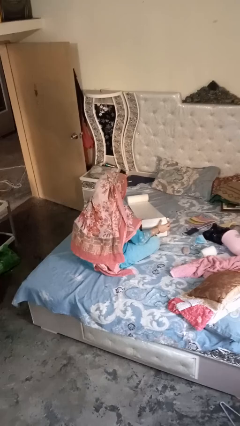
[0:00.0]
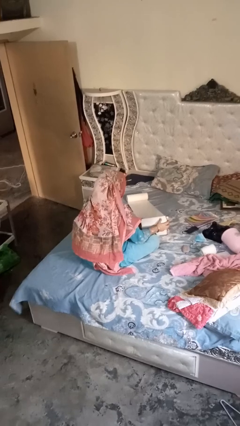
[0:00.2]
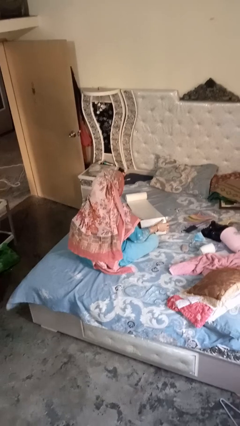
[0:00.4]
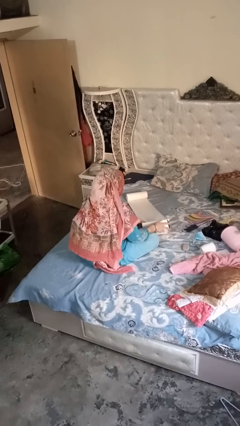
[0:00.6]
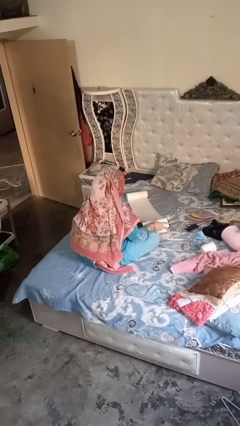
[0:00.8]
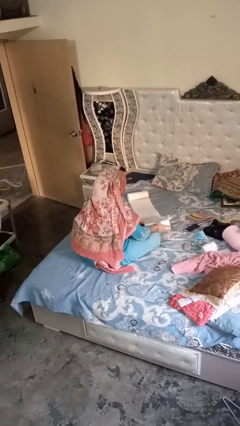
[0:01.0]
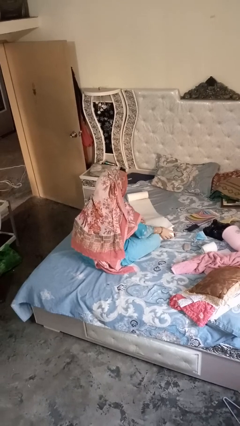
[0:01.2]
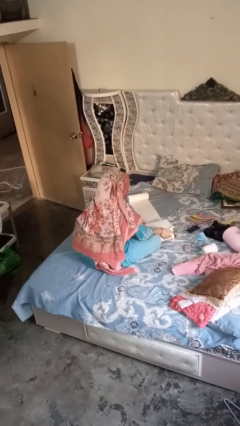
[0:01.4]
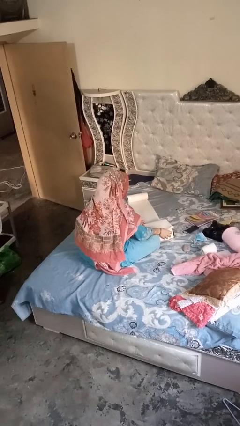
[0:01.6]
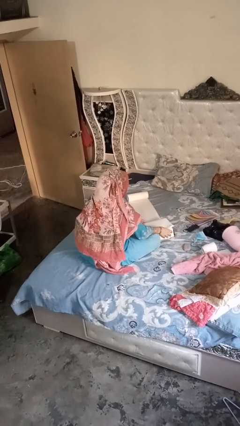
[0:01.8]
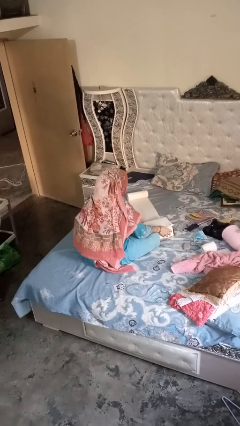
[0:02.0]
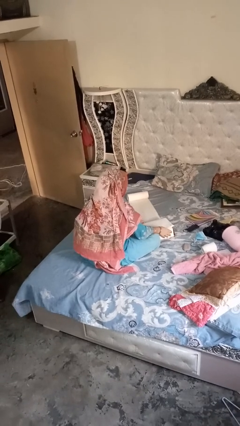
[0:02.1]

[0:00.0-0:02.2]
person wraps box

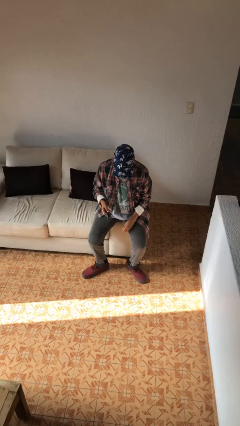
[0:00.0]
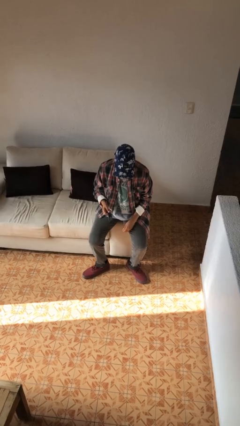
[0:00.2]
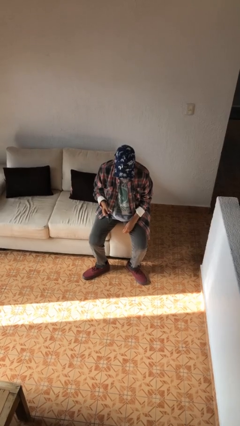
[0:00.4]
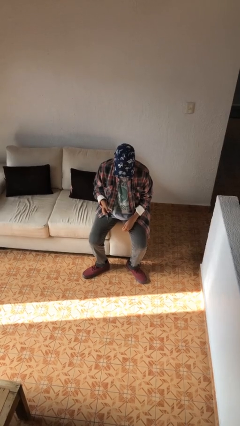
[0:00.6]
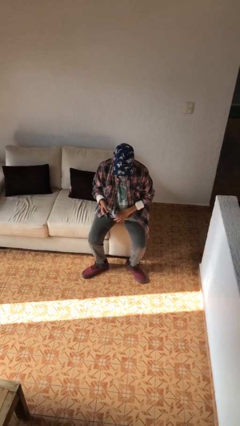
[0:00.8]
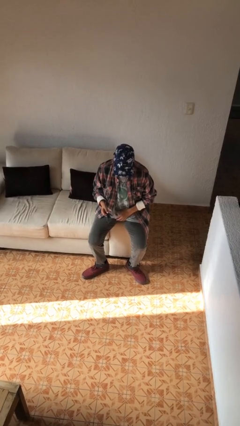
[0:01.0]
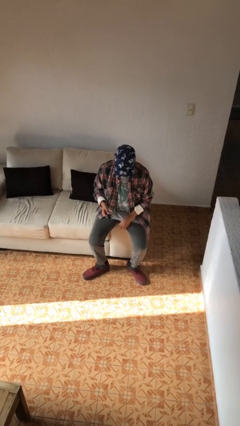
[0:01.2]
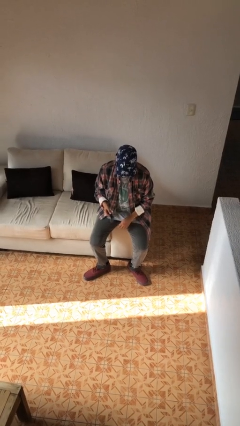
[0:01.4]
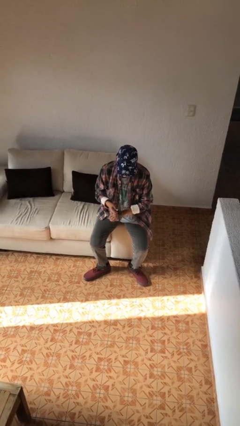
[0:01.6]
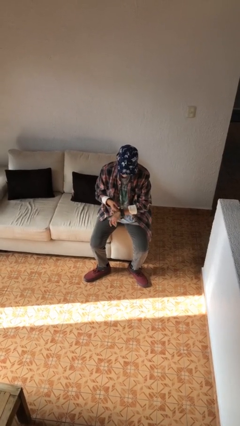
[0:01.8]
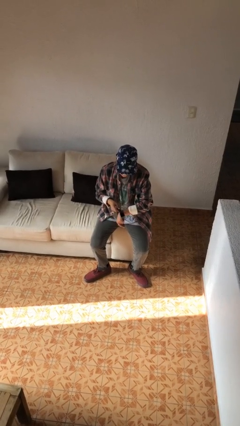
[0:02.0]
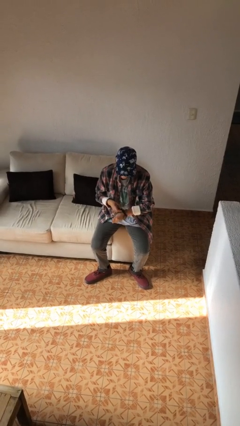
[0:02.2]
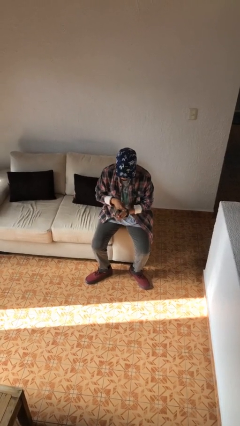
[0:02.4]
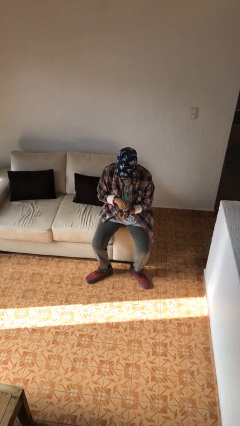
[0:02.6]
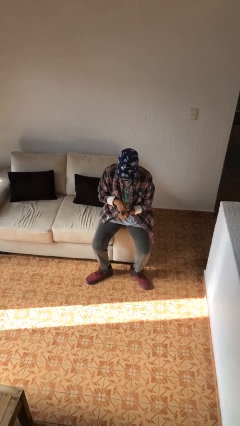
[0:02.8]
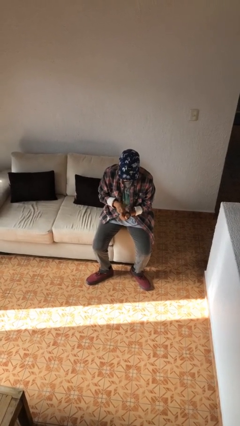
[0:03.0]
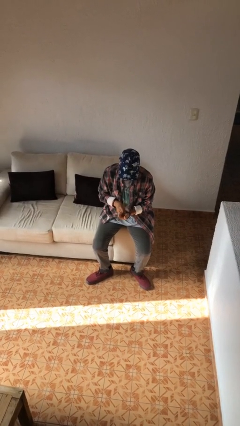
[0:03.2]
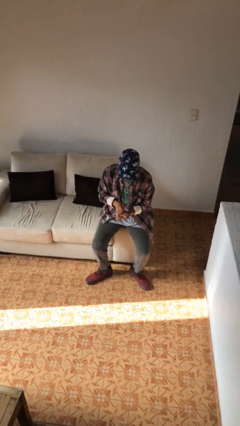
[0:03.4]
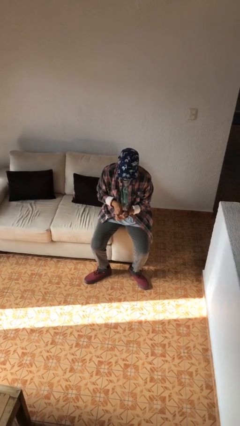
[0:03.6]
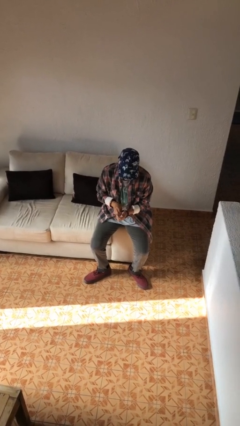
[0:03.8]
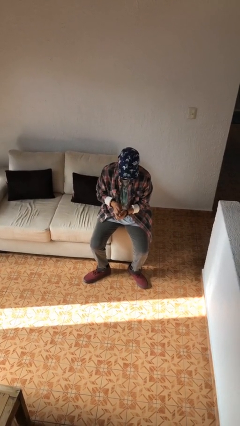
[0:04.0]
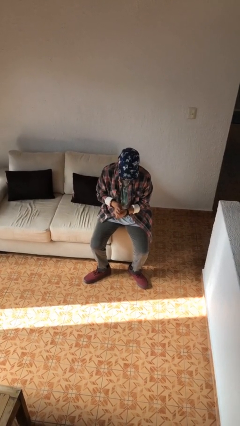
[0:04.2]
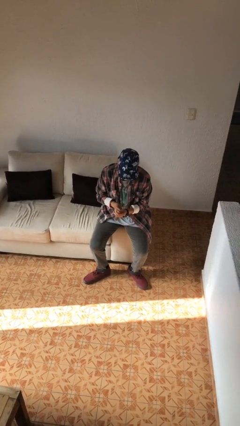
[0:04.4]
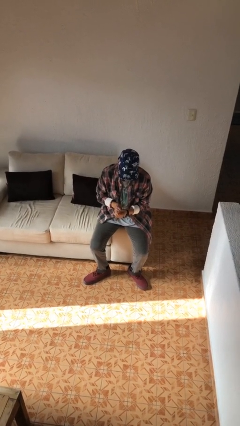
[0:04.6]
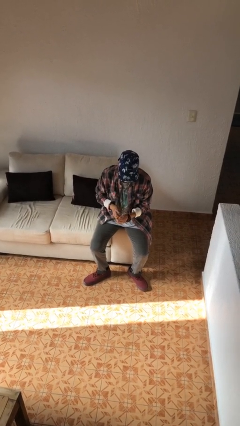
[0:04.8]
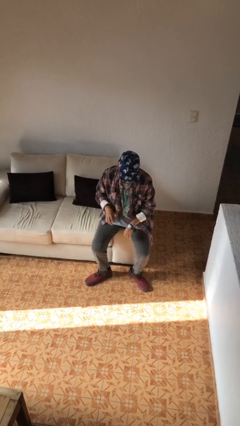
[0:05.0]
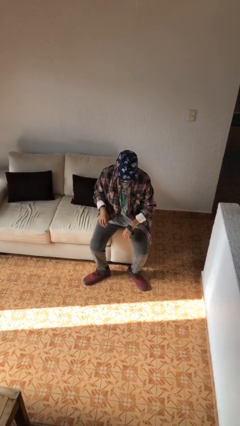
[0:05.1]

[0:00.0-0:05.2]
person puts on wristwatch

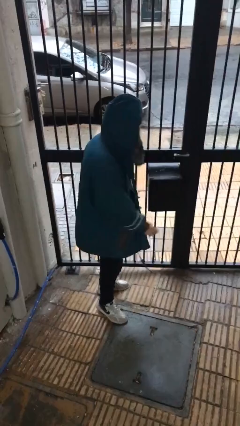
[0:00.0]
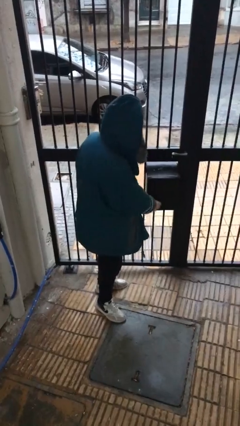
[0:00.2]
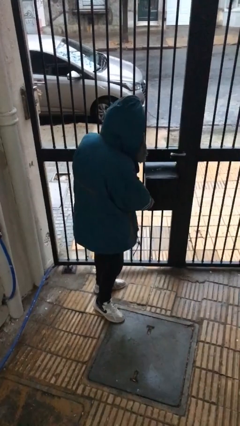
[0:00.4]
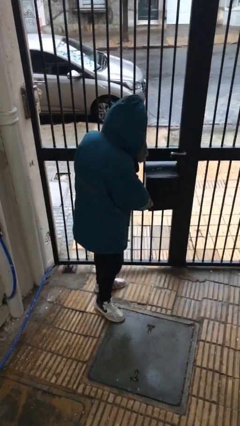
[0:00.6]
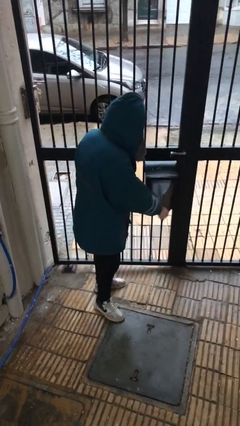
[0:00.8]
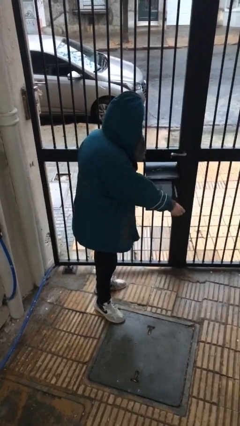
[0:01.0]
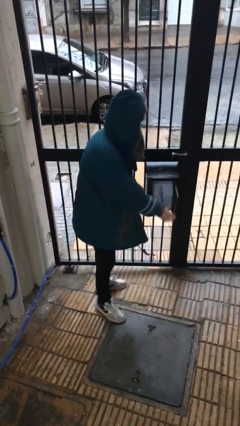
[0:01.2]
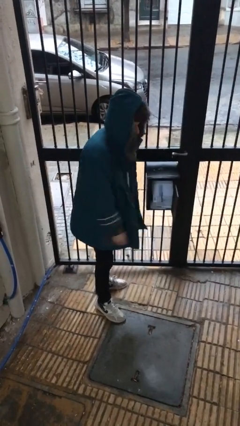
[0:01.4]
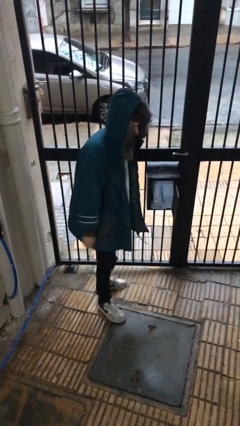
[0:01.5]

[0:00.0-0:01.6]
person opens mailbox

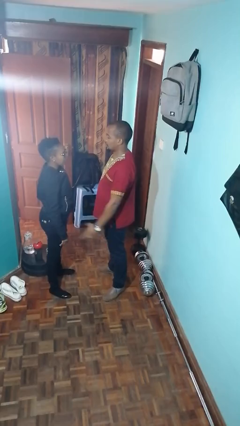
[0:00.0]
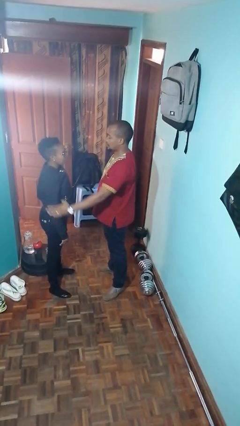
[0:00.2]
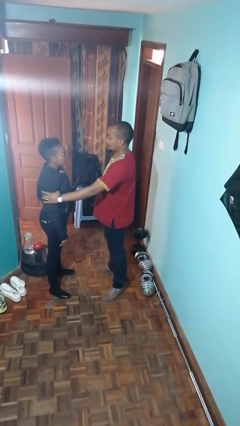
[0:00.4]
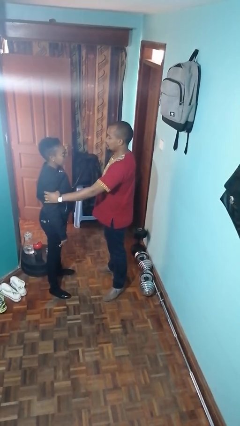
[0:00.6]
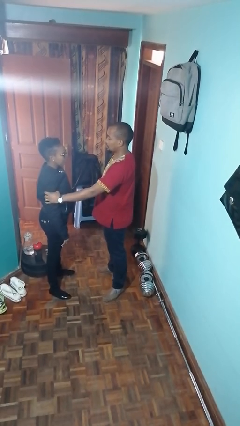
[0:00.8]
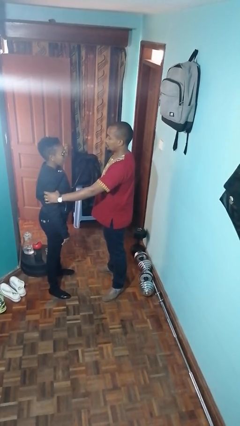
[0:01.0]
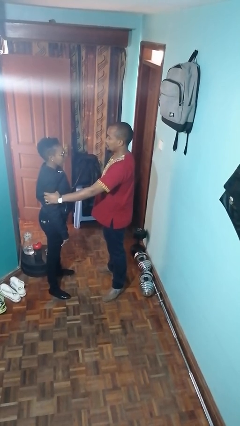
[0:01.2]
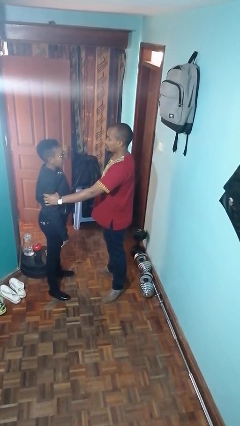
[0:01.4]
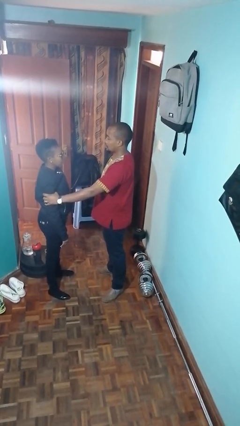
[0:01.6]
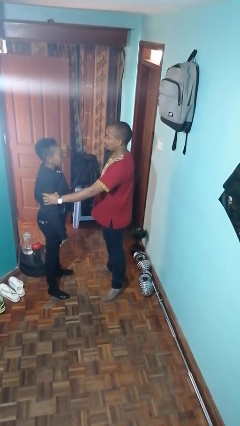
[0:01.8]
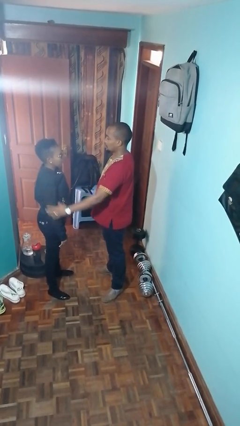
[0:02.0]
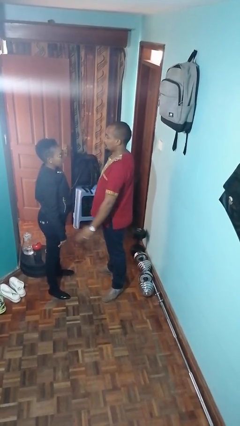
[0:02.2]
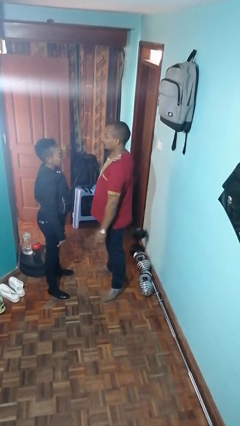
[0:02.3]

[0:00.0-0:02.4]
person grabs person by bicep

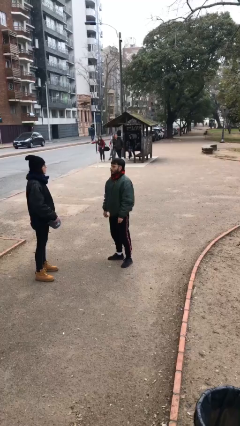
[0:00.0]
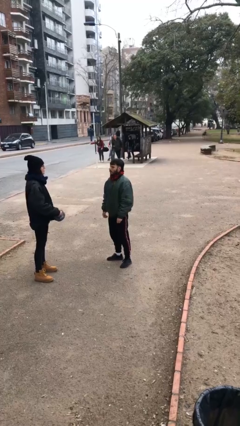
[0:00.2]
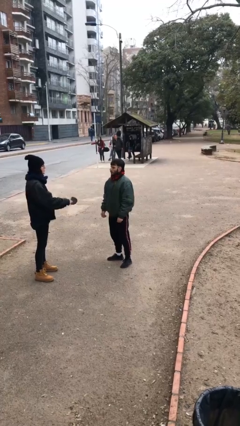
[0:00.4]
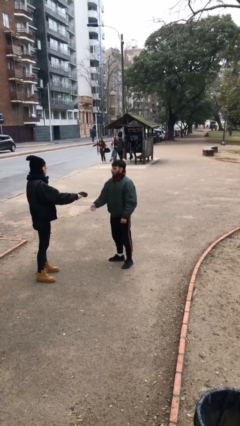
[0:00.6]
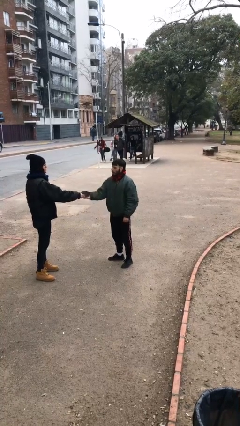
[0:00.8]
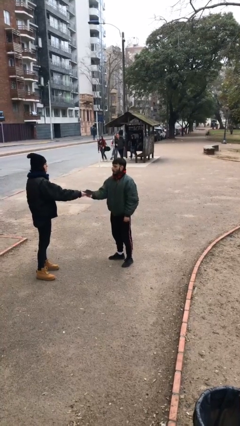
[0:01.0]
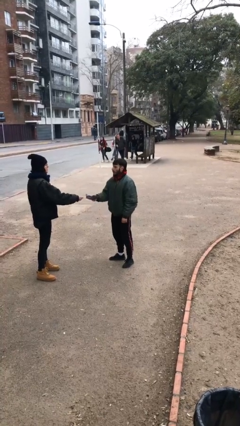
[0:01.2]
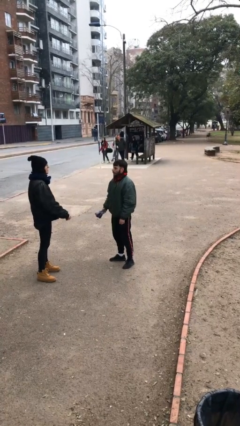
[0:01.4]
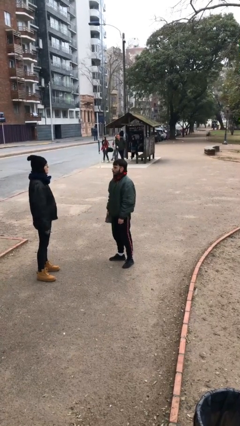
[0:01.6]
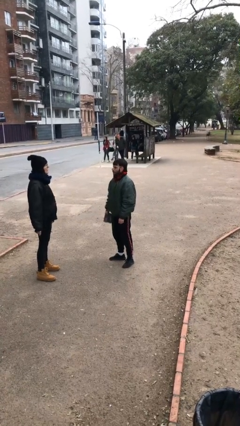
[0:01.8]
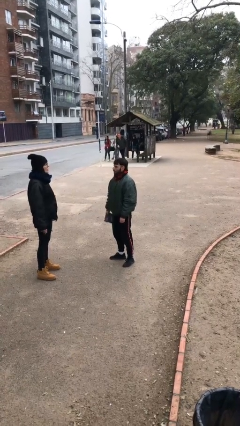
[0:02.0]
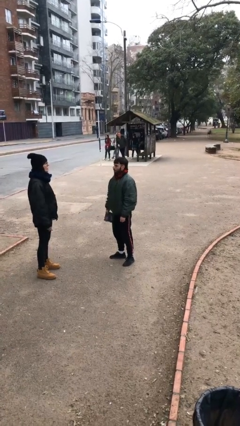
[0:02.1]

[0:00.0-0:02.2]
person transfers object to person

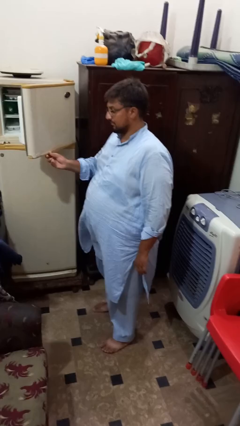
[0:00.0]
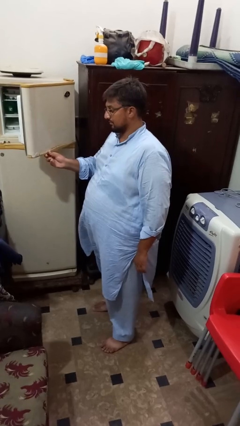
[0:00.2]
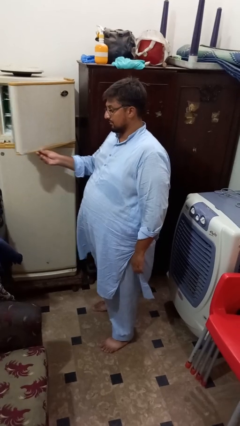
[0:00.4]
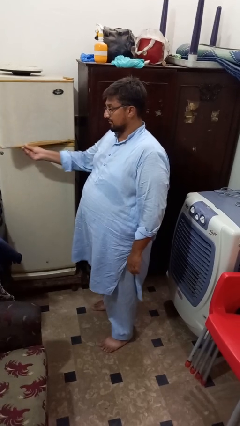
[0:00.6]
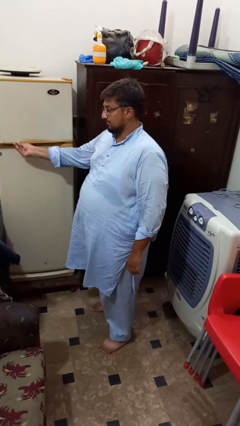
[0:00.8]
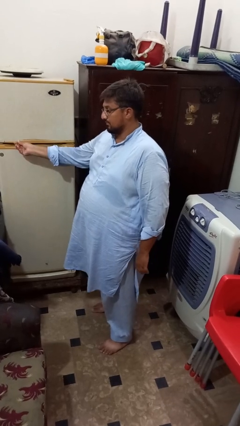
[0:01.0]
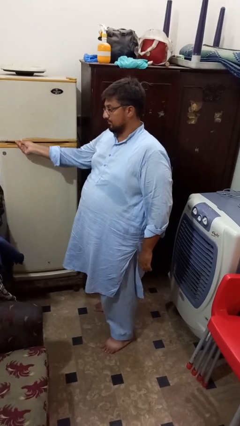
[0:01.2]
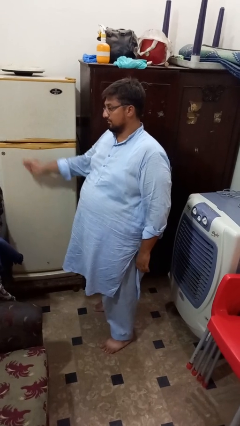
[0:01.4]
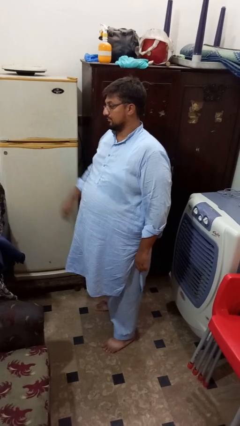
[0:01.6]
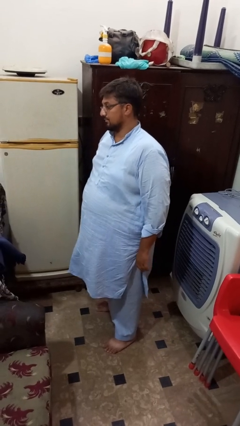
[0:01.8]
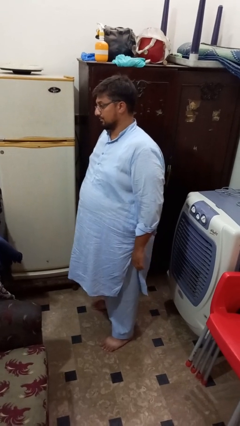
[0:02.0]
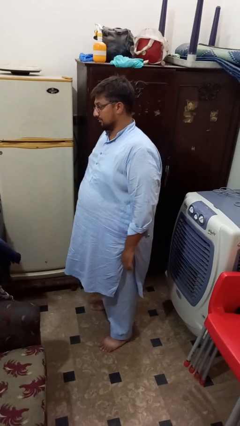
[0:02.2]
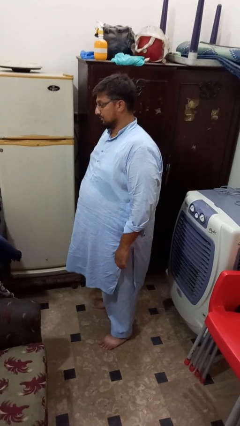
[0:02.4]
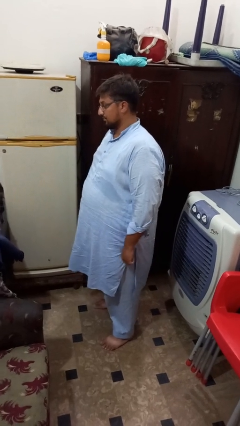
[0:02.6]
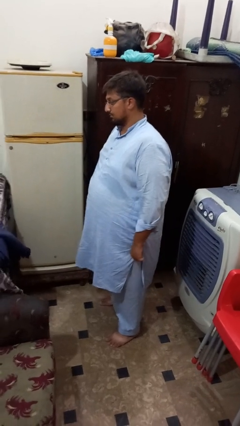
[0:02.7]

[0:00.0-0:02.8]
person closes refrigerator

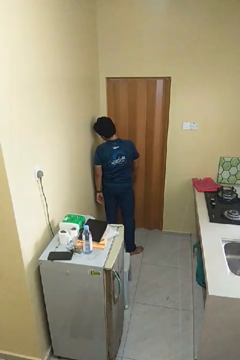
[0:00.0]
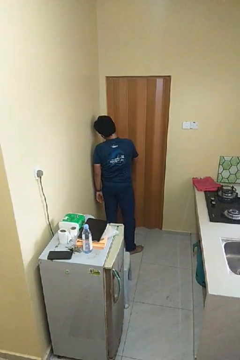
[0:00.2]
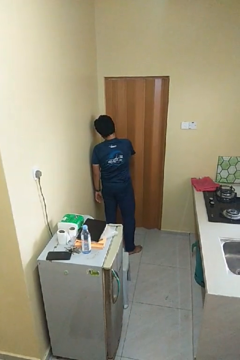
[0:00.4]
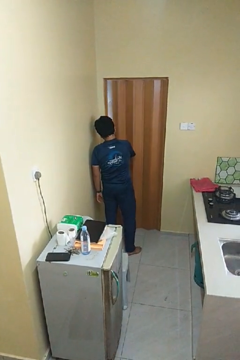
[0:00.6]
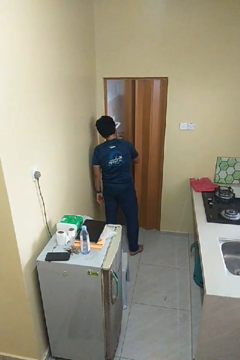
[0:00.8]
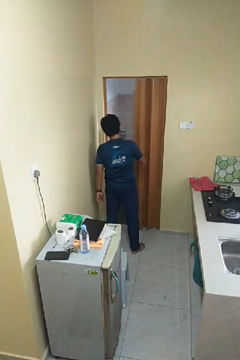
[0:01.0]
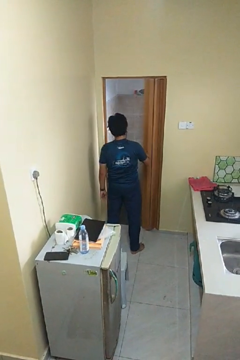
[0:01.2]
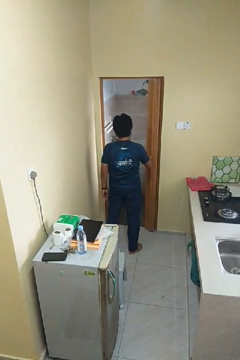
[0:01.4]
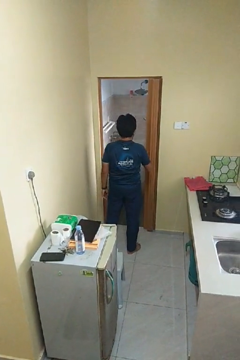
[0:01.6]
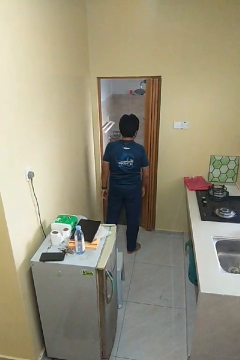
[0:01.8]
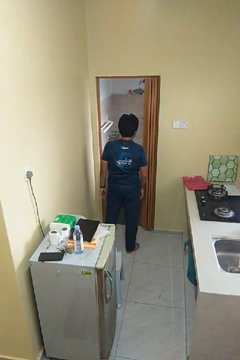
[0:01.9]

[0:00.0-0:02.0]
person opens sliding door
